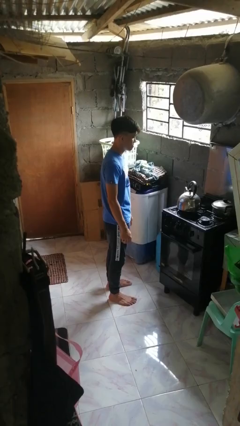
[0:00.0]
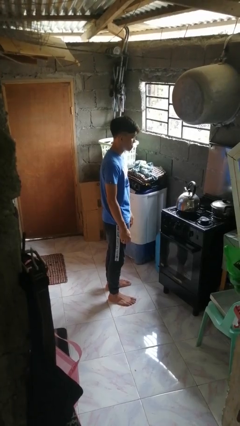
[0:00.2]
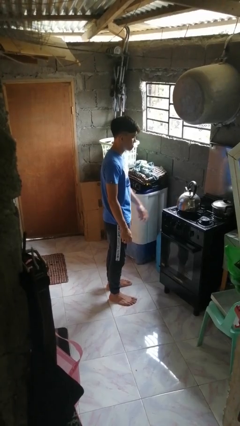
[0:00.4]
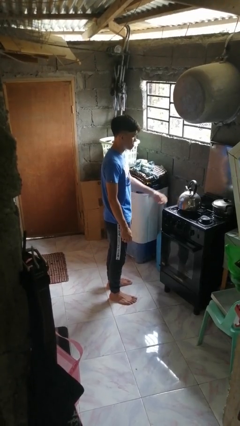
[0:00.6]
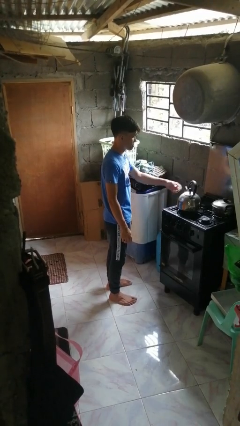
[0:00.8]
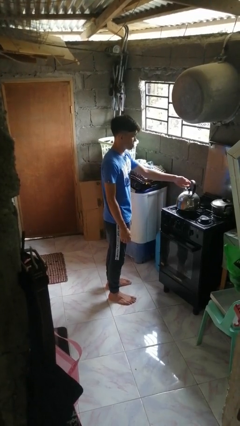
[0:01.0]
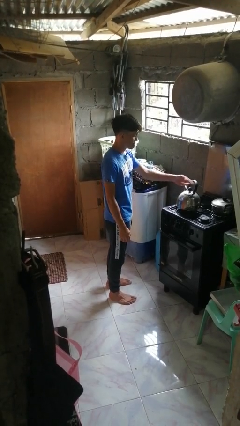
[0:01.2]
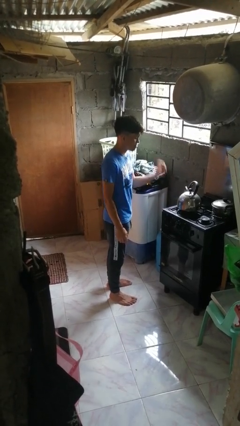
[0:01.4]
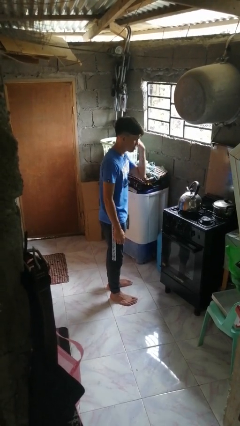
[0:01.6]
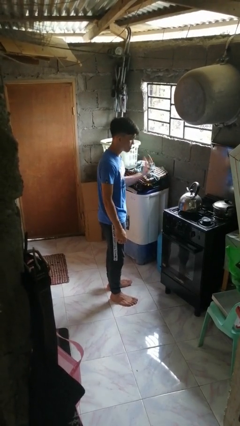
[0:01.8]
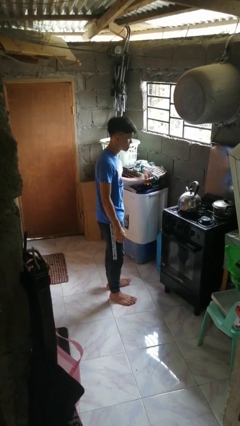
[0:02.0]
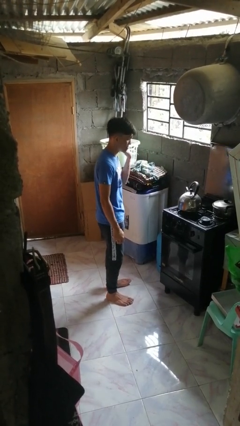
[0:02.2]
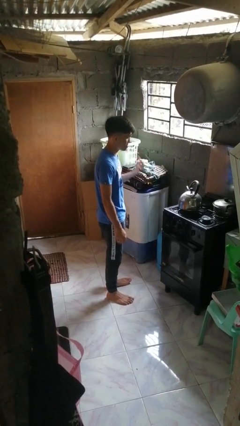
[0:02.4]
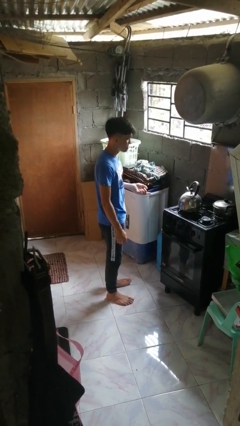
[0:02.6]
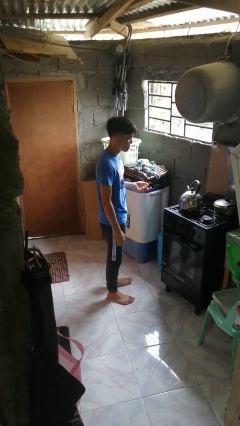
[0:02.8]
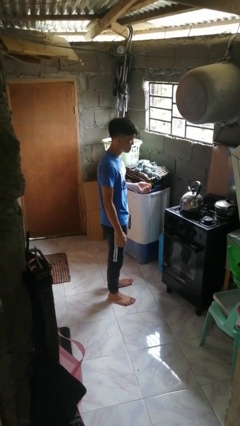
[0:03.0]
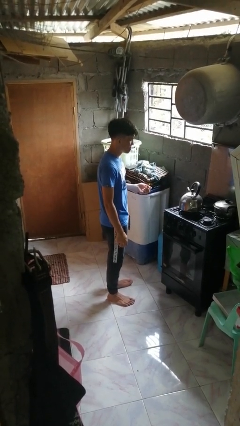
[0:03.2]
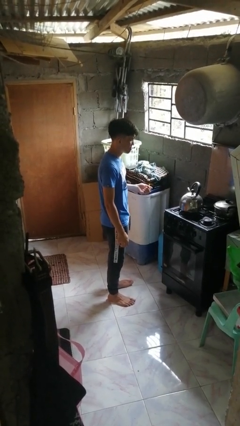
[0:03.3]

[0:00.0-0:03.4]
person burns hand

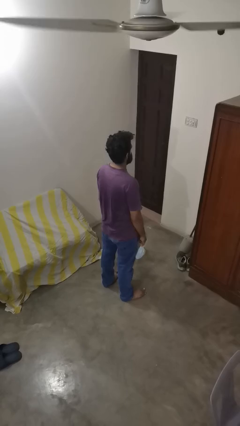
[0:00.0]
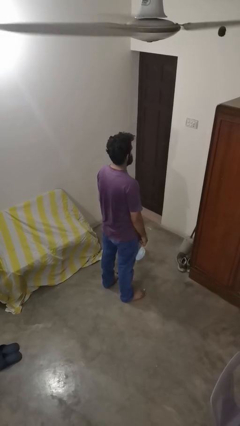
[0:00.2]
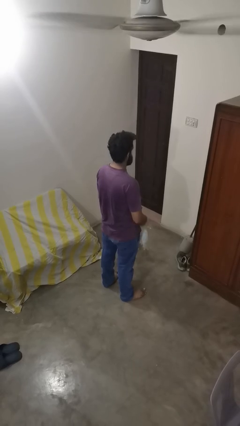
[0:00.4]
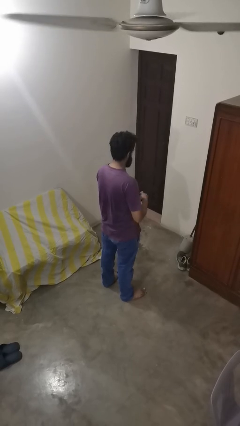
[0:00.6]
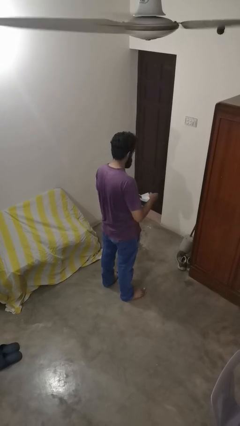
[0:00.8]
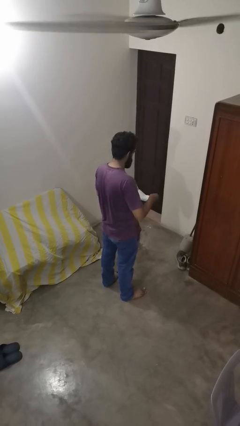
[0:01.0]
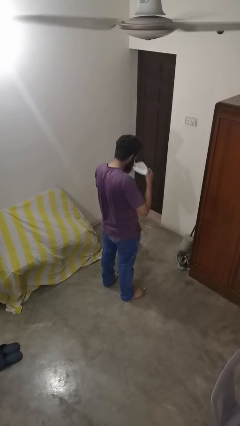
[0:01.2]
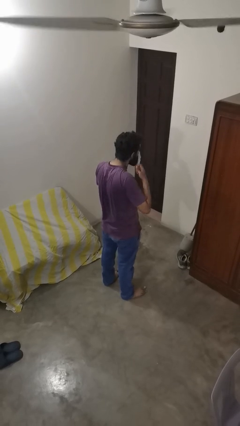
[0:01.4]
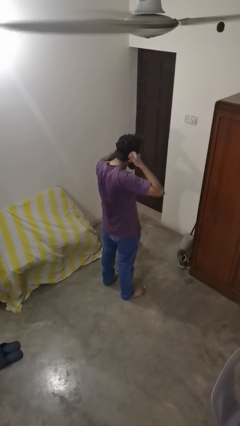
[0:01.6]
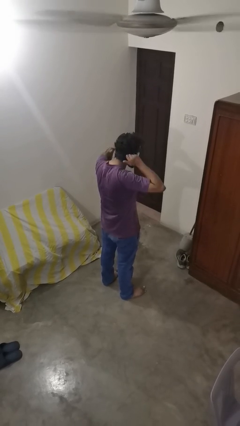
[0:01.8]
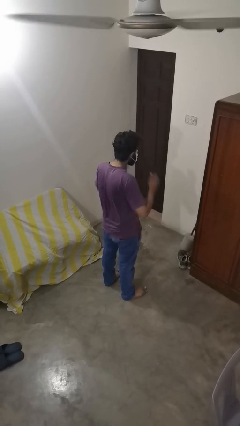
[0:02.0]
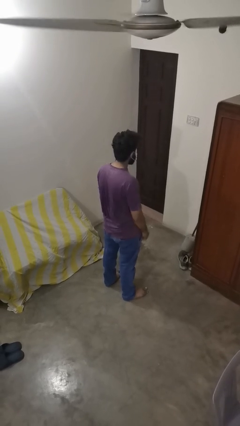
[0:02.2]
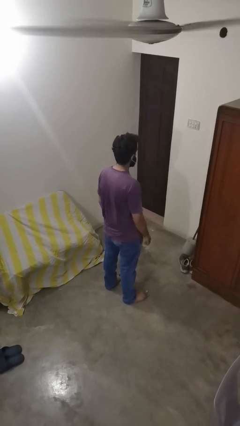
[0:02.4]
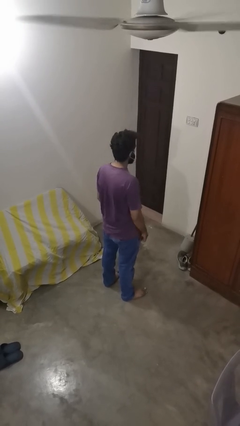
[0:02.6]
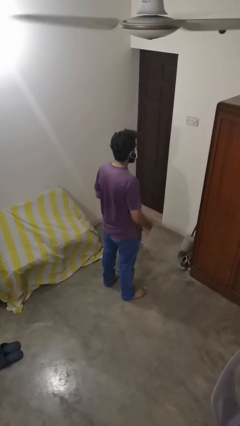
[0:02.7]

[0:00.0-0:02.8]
person puts on facemask

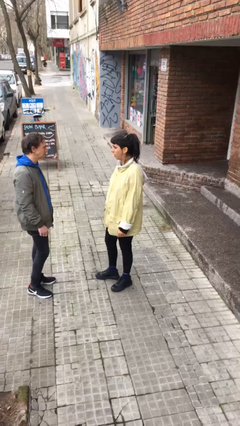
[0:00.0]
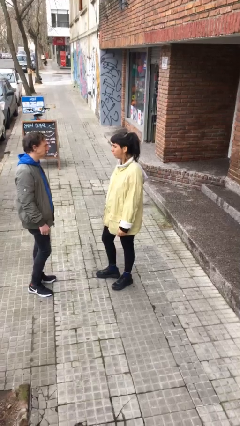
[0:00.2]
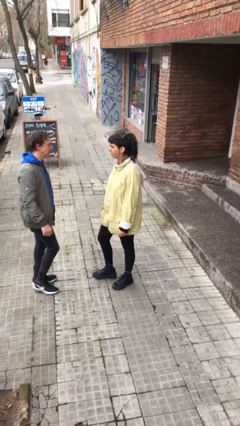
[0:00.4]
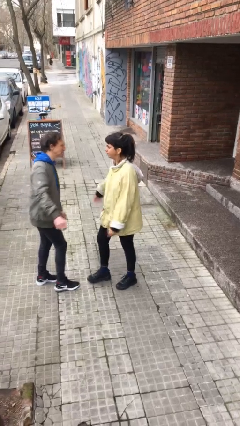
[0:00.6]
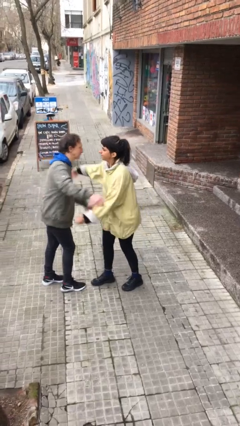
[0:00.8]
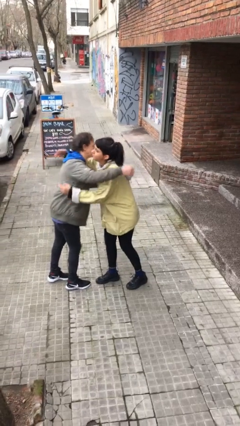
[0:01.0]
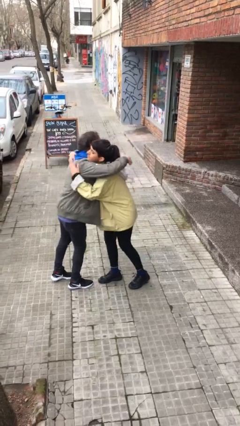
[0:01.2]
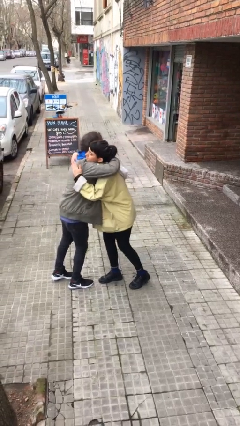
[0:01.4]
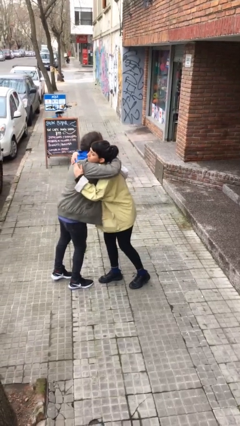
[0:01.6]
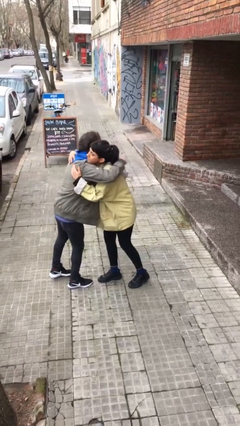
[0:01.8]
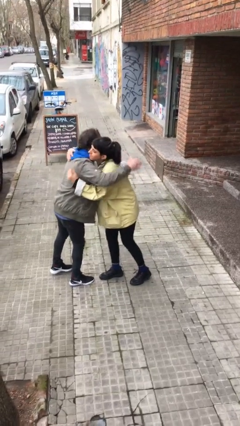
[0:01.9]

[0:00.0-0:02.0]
person embraces person

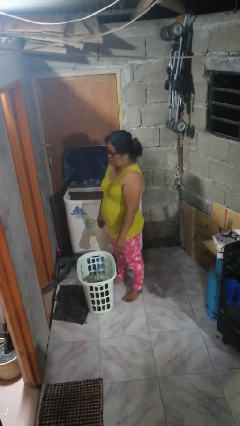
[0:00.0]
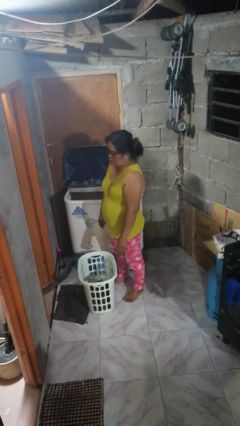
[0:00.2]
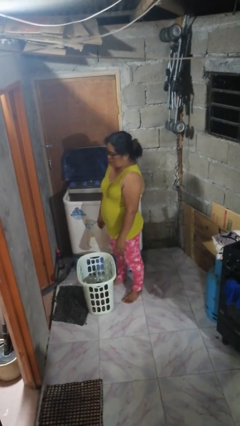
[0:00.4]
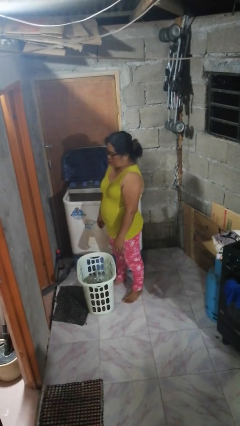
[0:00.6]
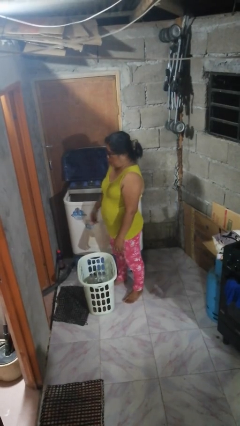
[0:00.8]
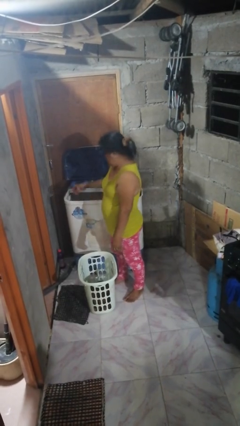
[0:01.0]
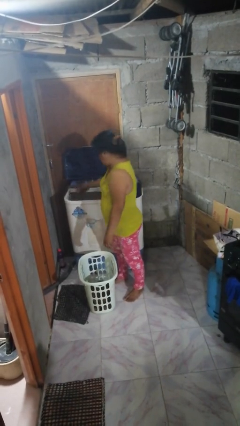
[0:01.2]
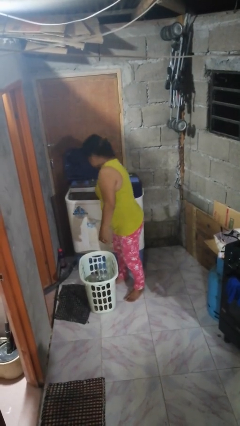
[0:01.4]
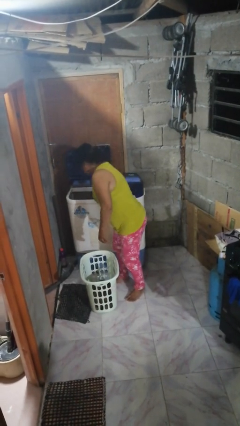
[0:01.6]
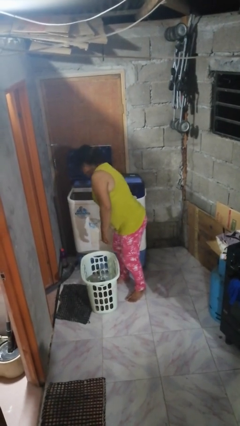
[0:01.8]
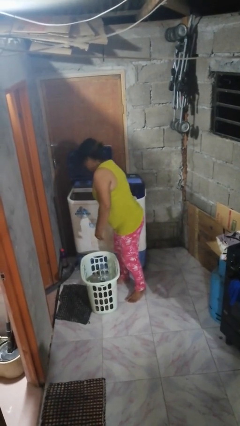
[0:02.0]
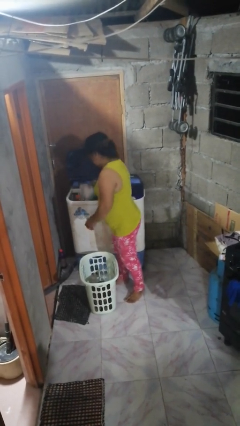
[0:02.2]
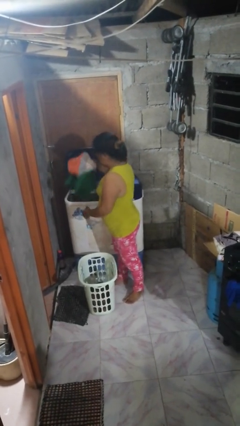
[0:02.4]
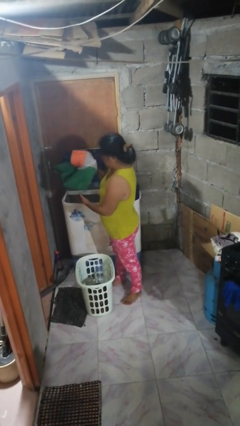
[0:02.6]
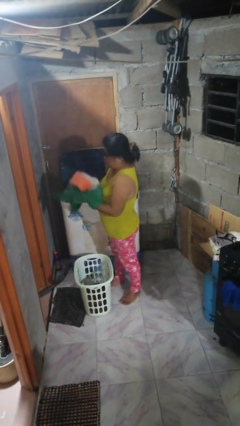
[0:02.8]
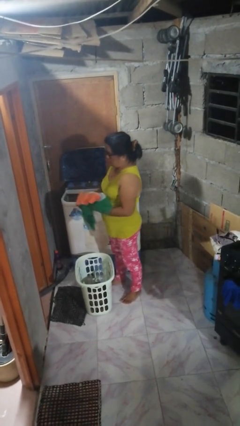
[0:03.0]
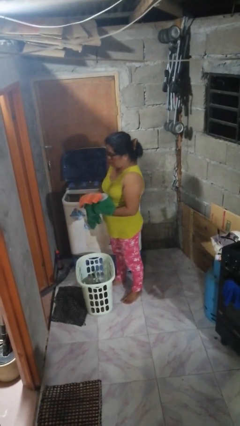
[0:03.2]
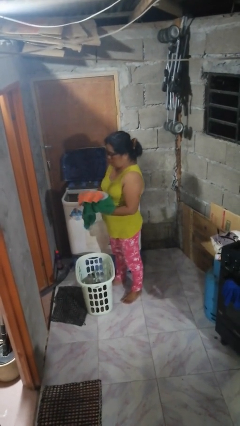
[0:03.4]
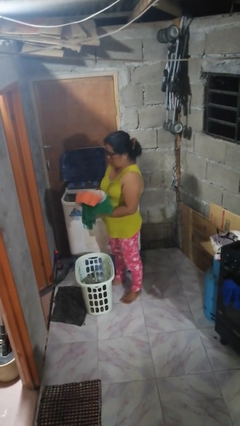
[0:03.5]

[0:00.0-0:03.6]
person unloads clotheswasher

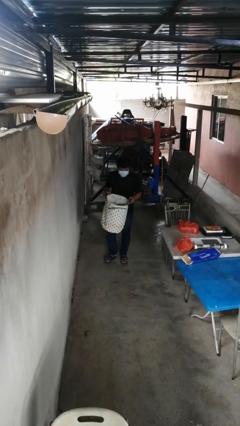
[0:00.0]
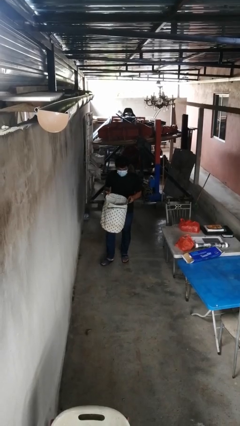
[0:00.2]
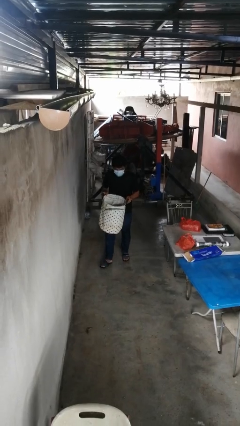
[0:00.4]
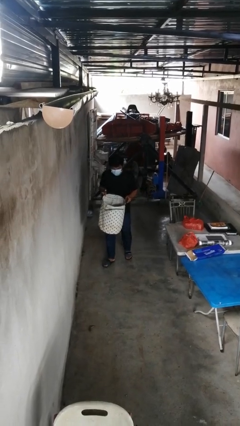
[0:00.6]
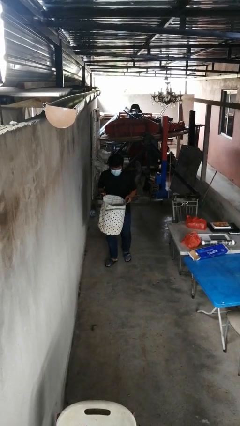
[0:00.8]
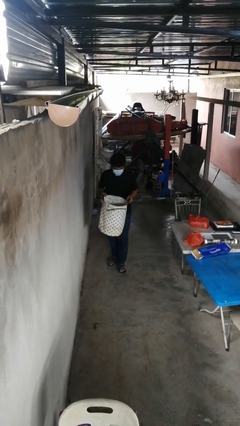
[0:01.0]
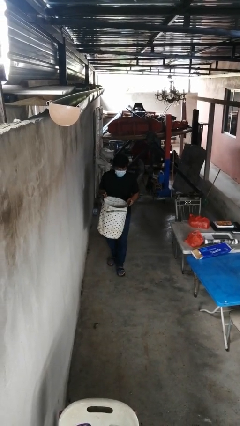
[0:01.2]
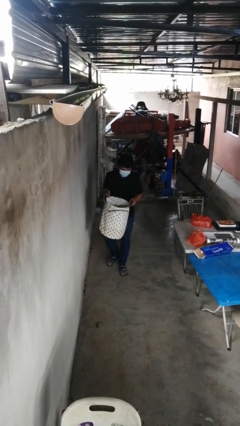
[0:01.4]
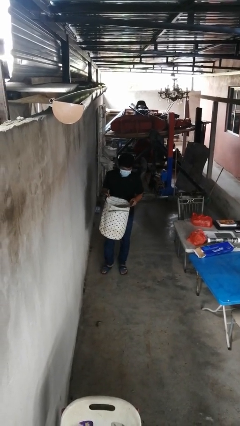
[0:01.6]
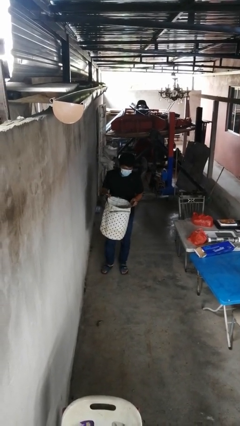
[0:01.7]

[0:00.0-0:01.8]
person carries laundry basket

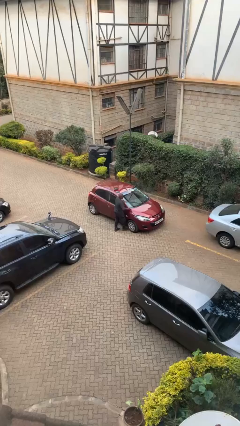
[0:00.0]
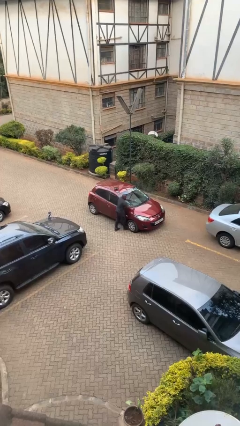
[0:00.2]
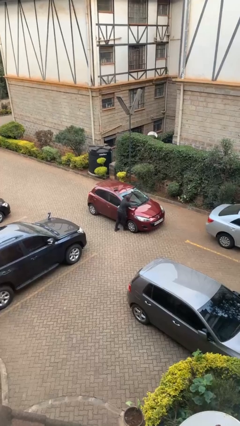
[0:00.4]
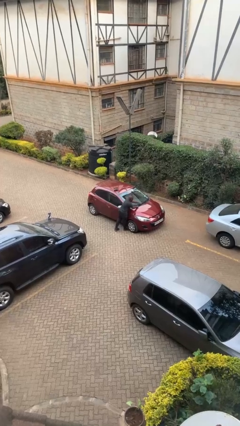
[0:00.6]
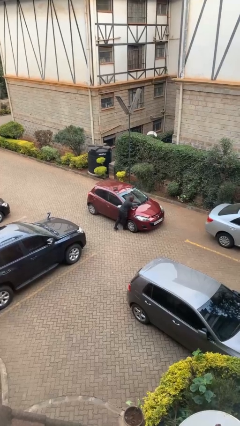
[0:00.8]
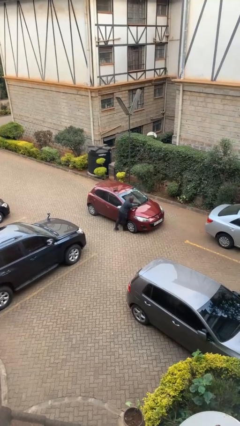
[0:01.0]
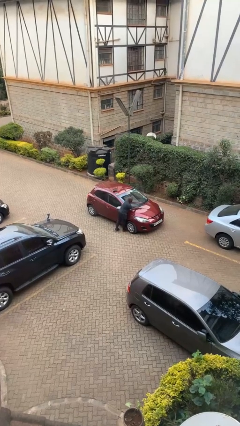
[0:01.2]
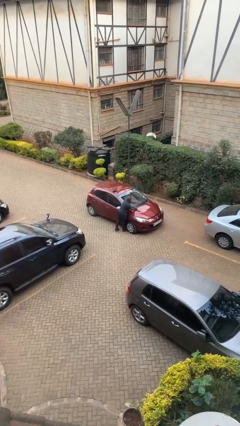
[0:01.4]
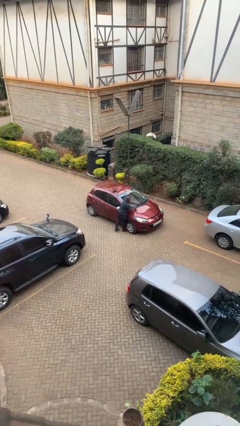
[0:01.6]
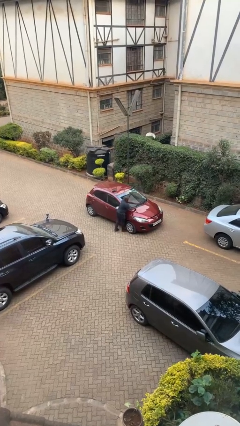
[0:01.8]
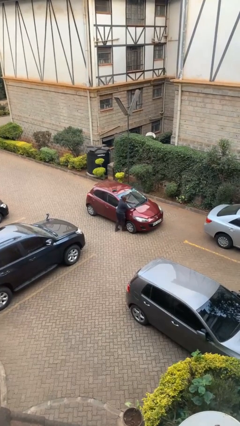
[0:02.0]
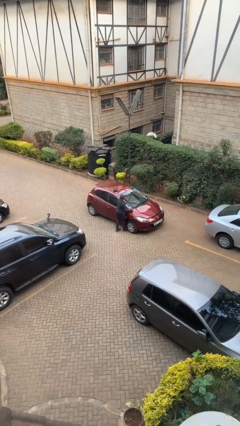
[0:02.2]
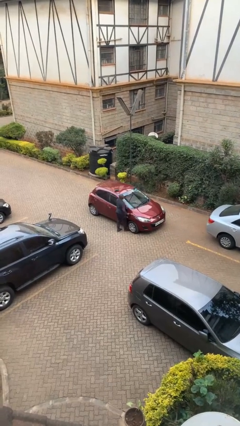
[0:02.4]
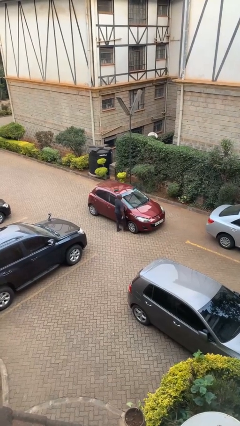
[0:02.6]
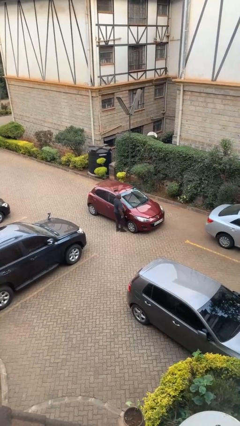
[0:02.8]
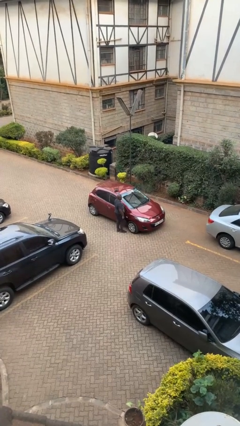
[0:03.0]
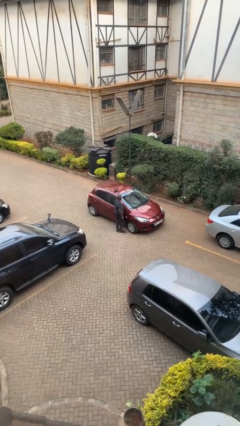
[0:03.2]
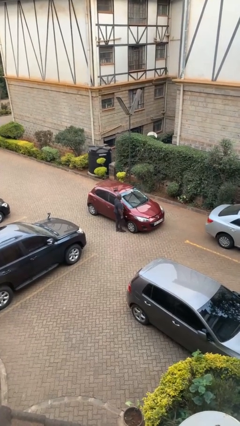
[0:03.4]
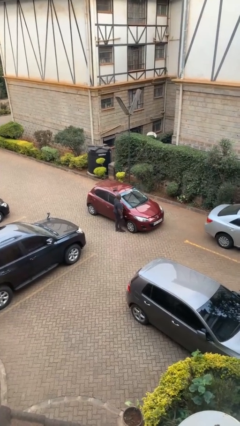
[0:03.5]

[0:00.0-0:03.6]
person flips up car wipers

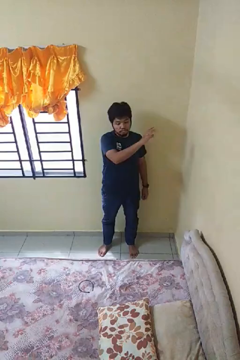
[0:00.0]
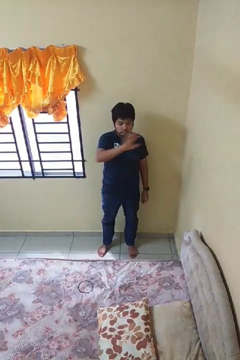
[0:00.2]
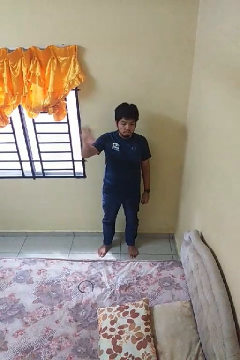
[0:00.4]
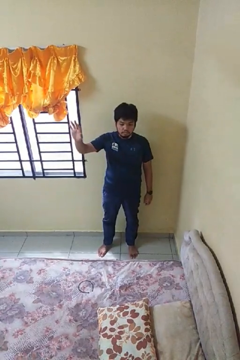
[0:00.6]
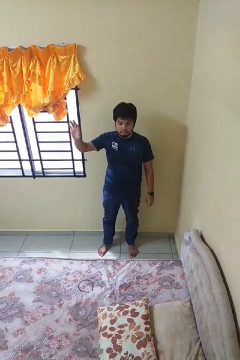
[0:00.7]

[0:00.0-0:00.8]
person gestures swipe right
